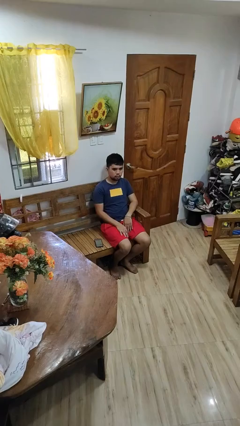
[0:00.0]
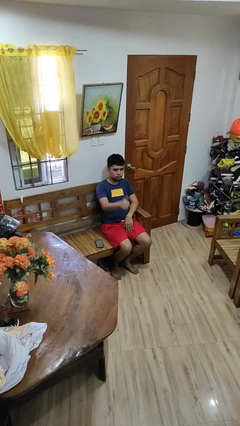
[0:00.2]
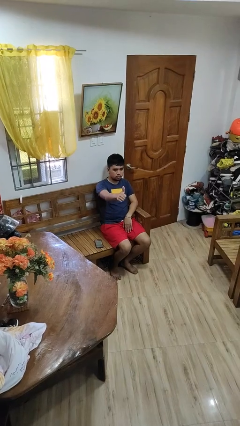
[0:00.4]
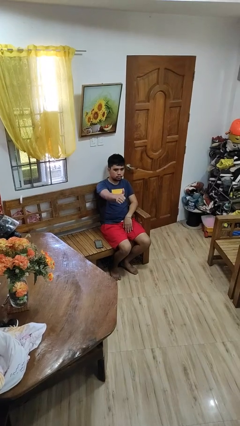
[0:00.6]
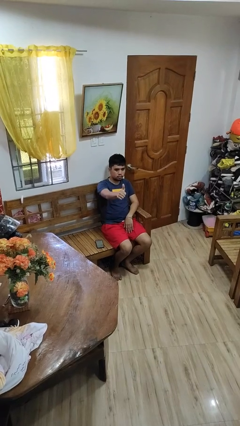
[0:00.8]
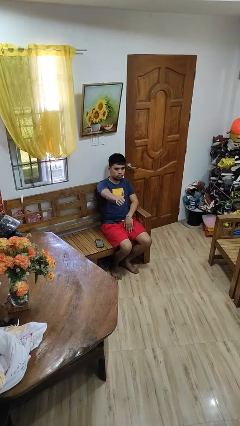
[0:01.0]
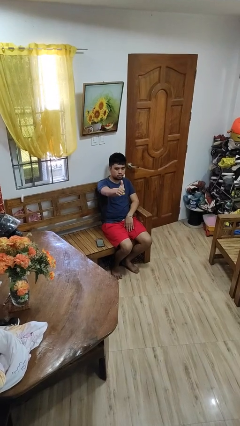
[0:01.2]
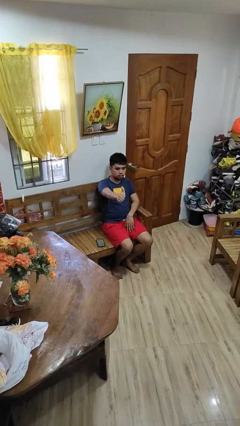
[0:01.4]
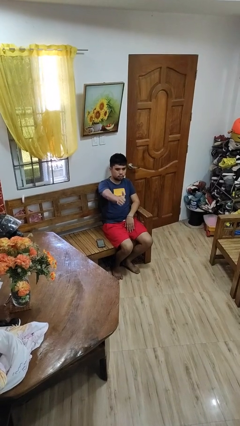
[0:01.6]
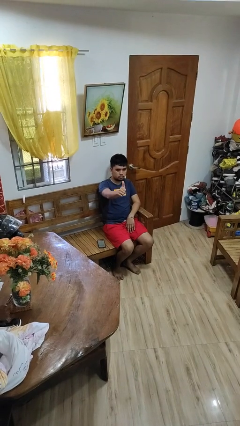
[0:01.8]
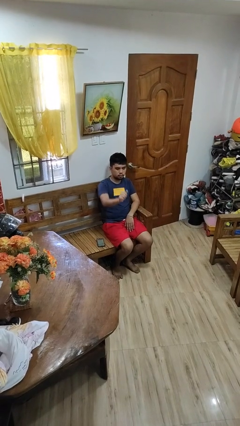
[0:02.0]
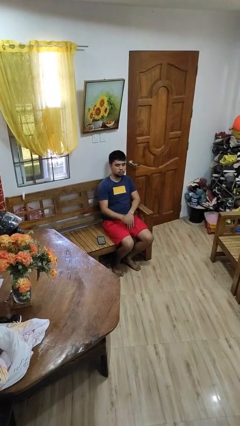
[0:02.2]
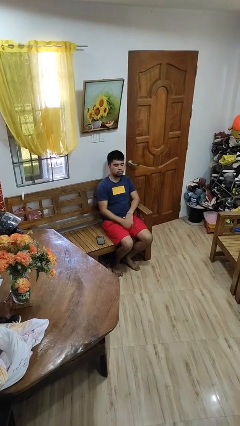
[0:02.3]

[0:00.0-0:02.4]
person gestures thumbs up

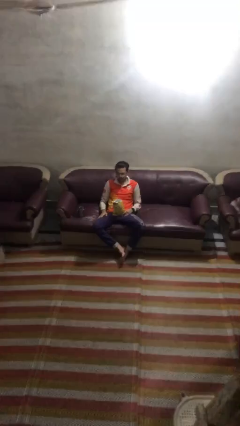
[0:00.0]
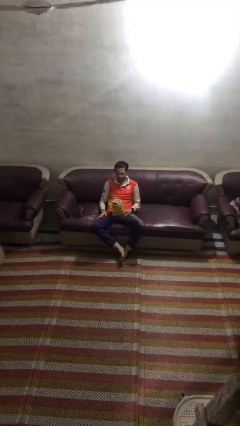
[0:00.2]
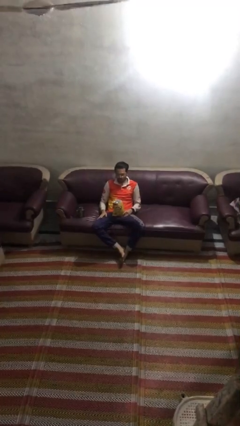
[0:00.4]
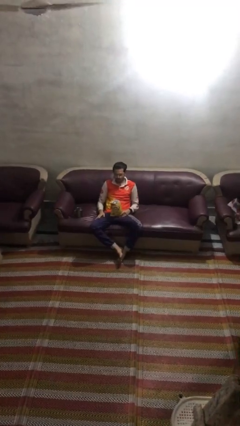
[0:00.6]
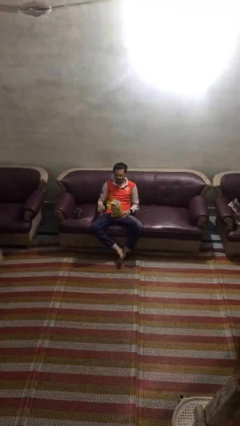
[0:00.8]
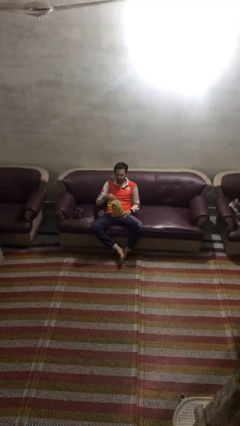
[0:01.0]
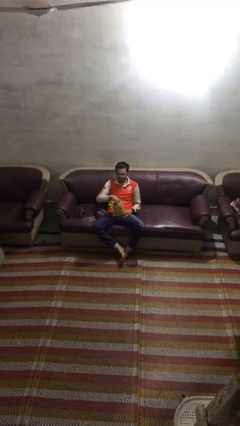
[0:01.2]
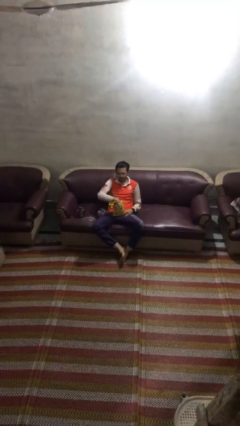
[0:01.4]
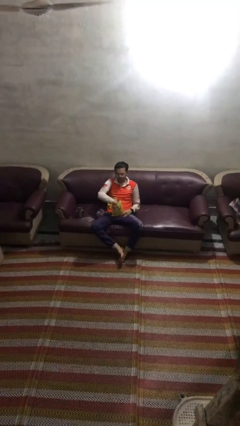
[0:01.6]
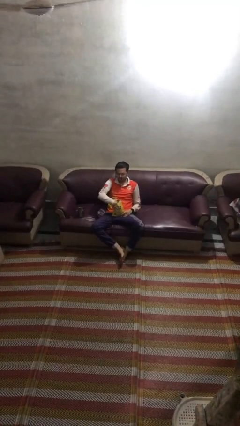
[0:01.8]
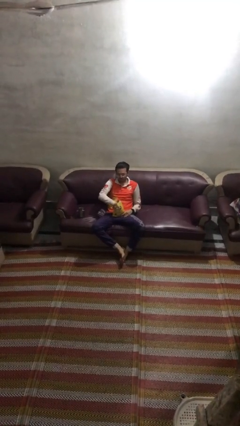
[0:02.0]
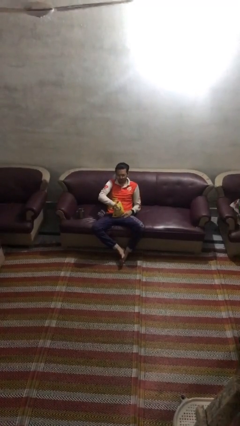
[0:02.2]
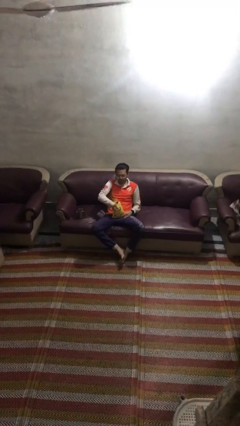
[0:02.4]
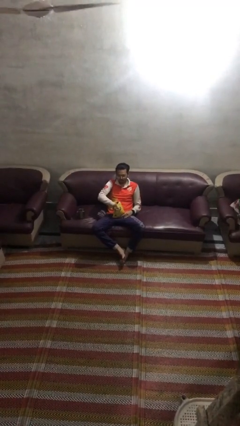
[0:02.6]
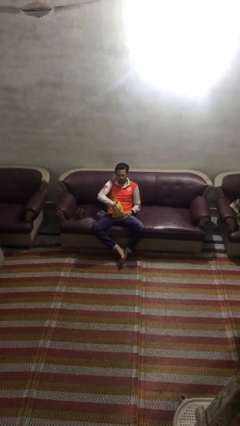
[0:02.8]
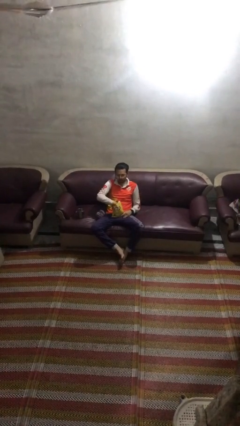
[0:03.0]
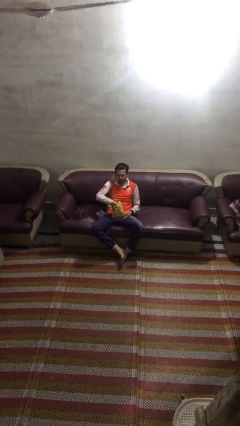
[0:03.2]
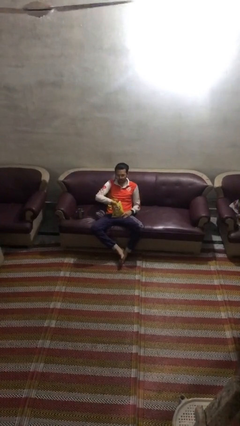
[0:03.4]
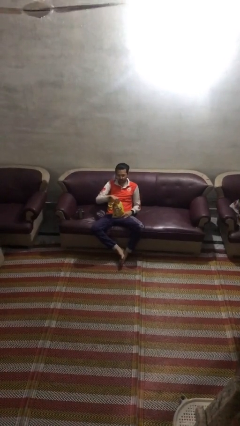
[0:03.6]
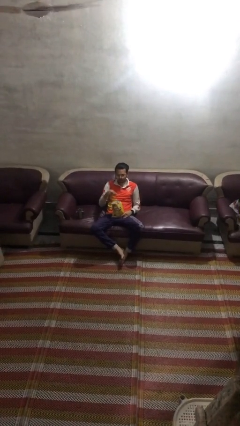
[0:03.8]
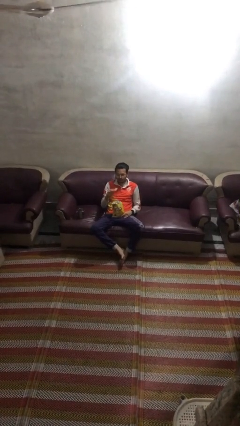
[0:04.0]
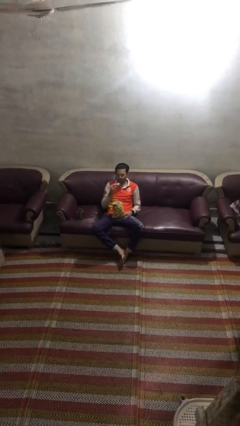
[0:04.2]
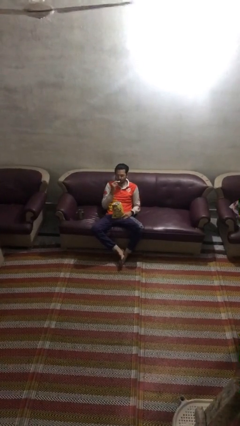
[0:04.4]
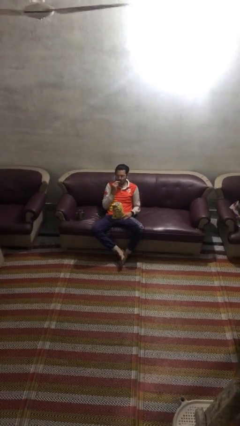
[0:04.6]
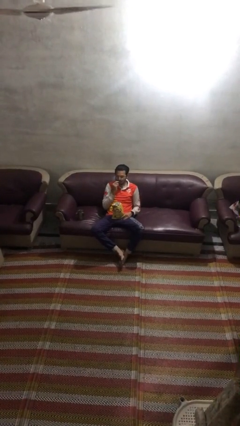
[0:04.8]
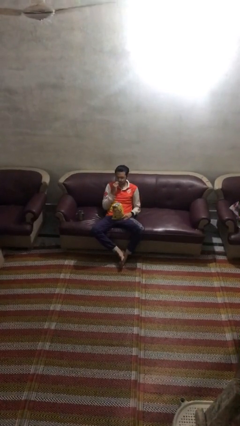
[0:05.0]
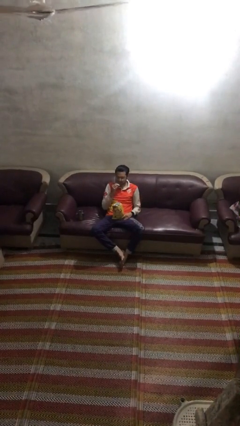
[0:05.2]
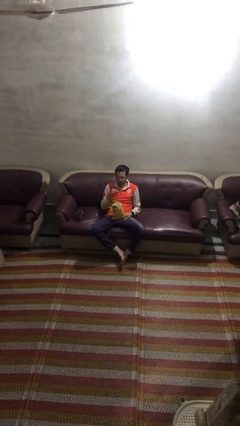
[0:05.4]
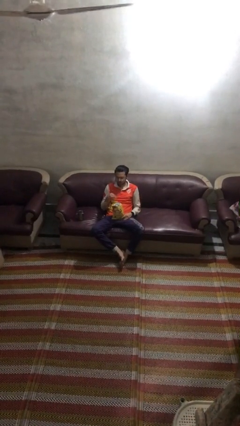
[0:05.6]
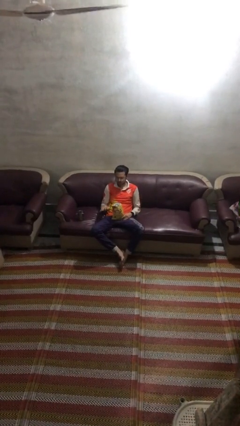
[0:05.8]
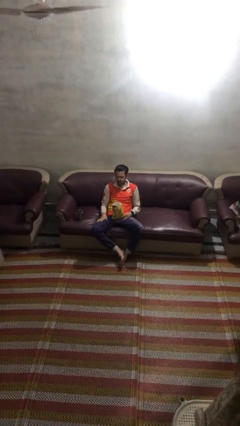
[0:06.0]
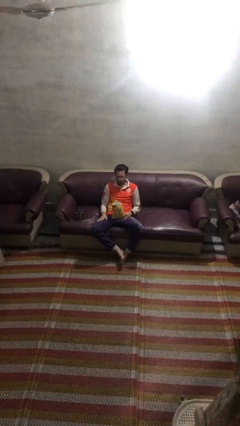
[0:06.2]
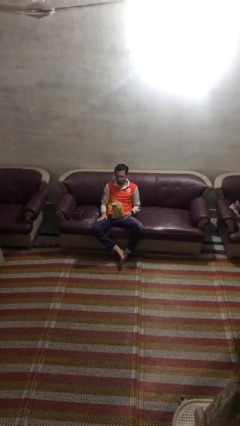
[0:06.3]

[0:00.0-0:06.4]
person eats snack from bag

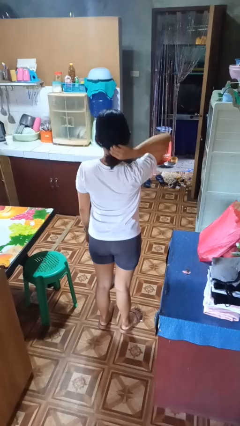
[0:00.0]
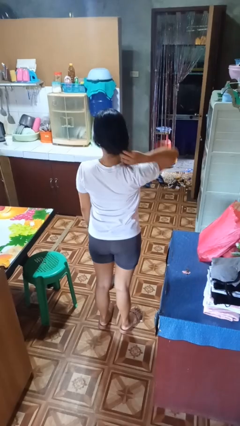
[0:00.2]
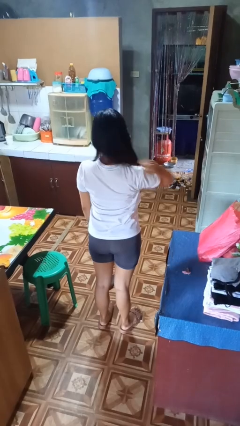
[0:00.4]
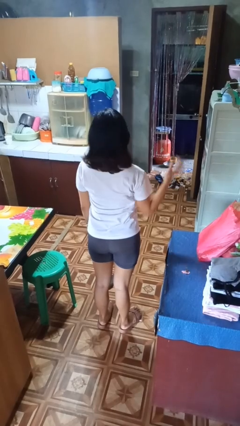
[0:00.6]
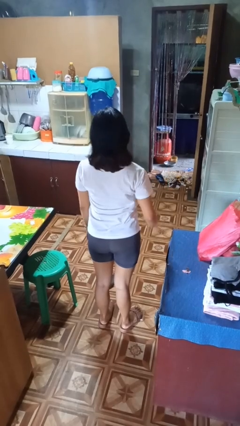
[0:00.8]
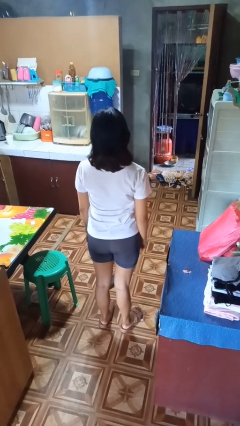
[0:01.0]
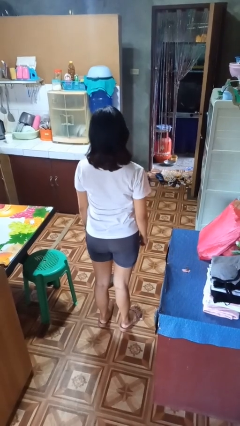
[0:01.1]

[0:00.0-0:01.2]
person takes off hairtie

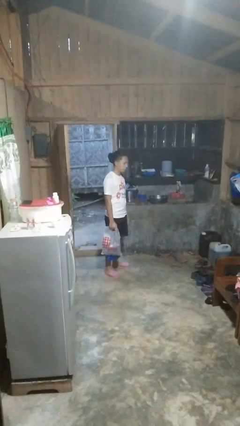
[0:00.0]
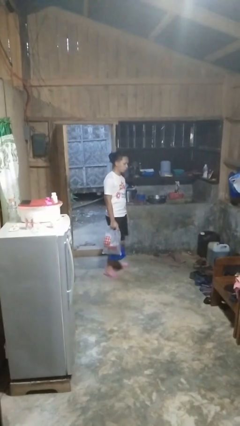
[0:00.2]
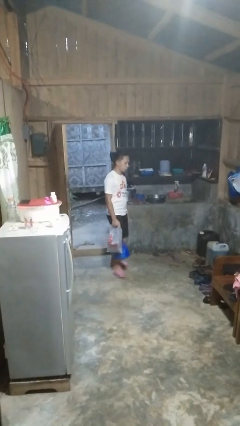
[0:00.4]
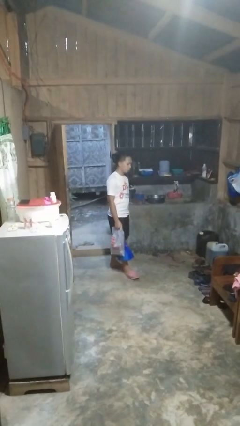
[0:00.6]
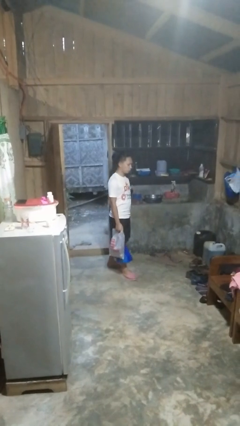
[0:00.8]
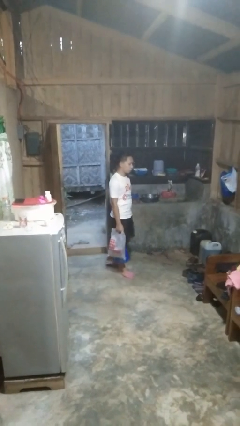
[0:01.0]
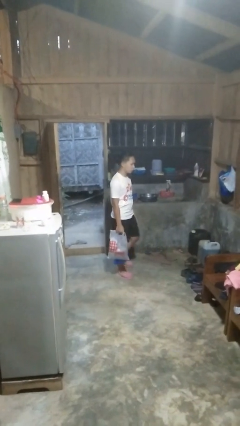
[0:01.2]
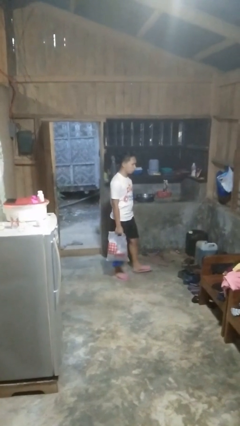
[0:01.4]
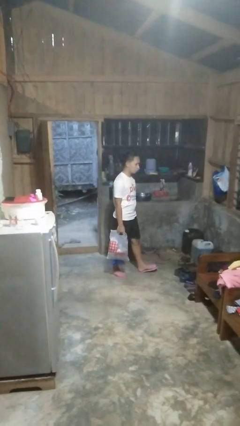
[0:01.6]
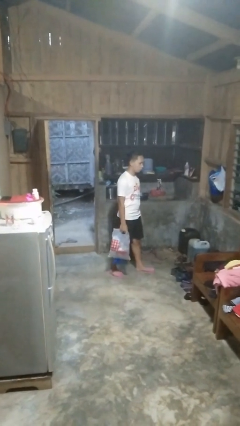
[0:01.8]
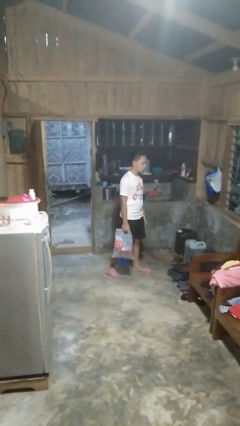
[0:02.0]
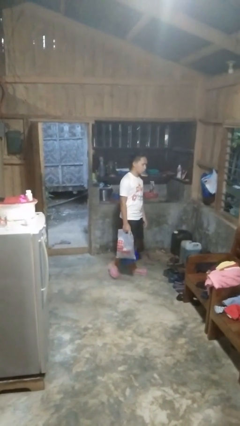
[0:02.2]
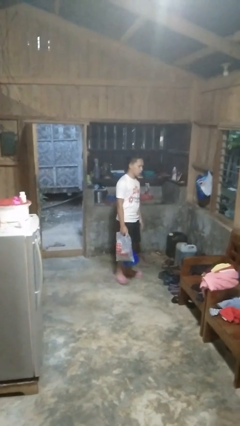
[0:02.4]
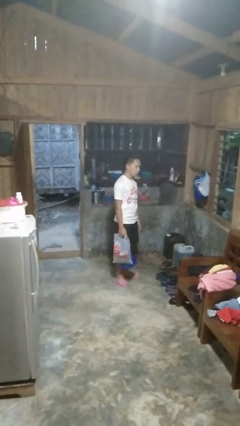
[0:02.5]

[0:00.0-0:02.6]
person carries groceries

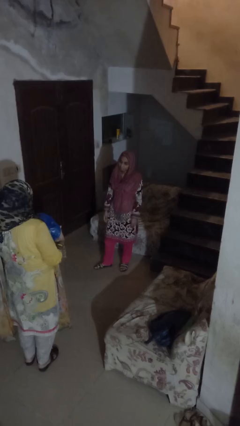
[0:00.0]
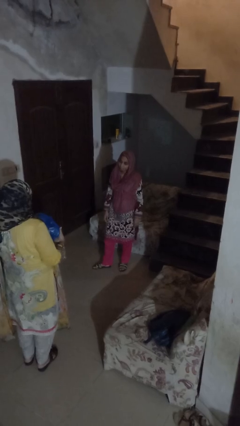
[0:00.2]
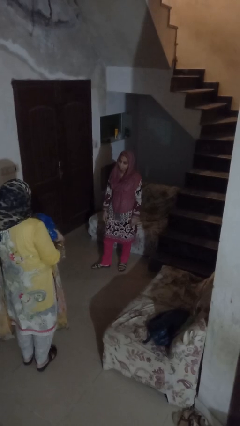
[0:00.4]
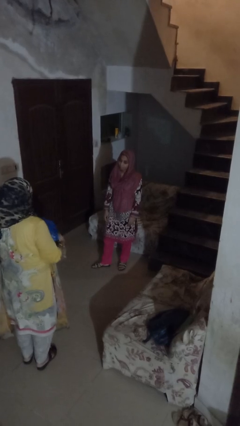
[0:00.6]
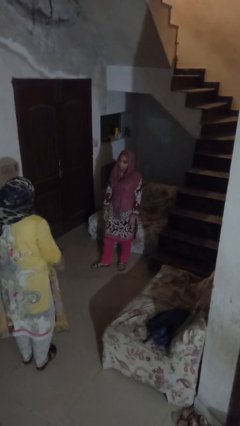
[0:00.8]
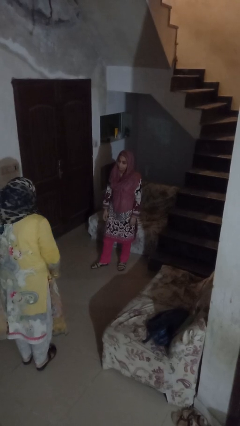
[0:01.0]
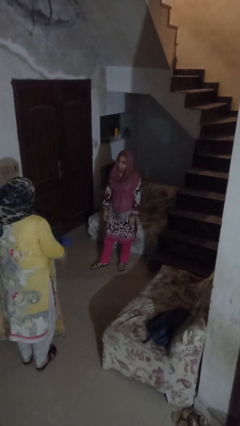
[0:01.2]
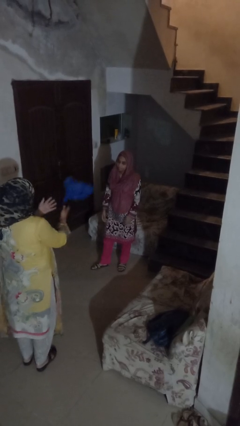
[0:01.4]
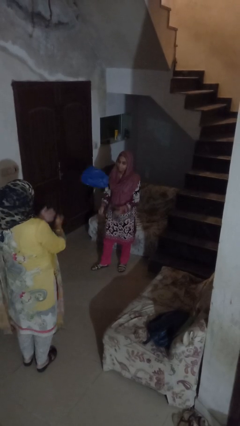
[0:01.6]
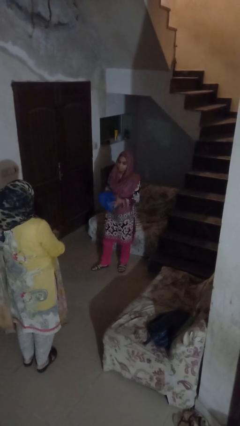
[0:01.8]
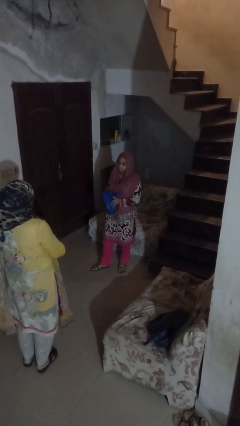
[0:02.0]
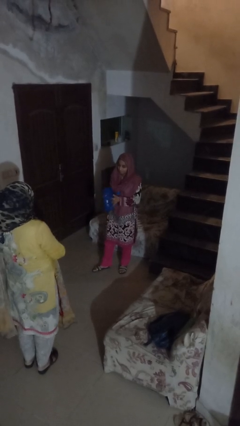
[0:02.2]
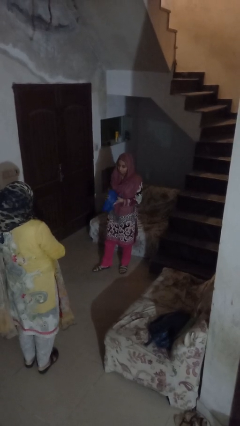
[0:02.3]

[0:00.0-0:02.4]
person catches object from person

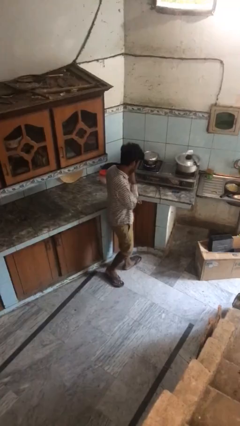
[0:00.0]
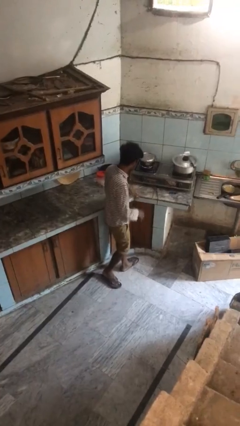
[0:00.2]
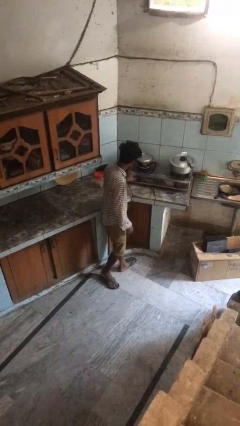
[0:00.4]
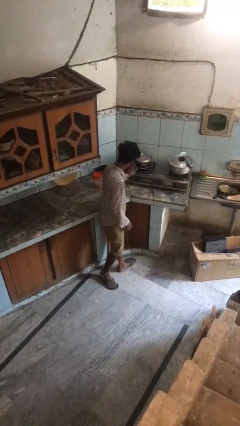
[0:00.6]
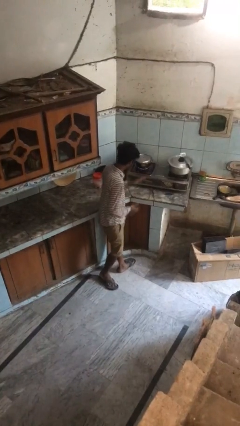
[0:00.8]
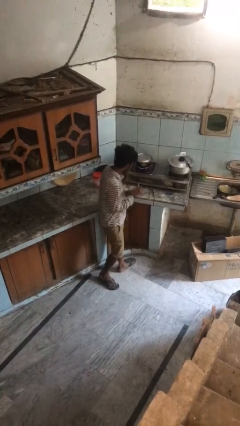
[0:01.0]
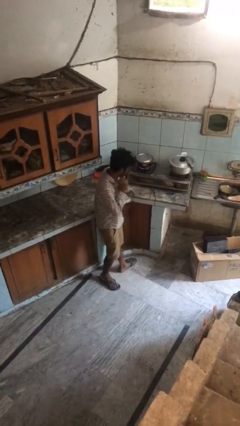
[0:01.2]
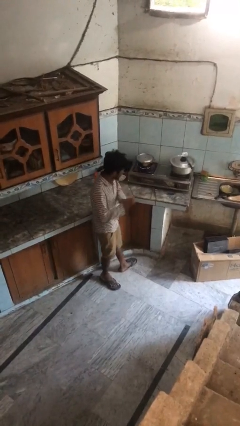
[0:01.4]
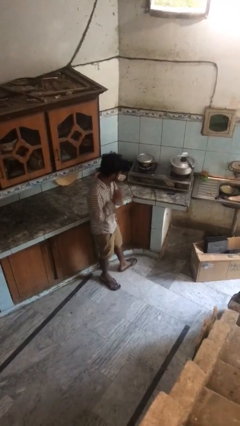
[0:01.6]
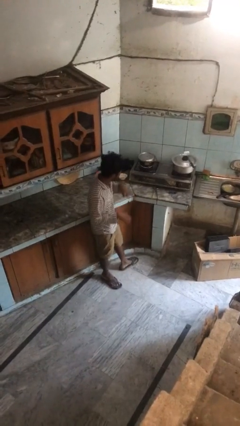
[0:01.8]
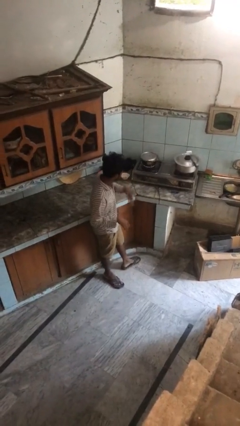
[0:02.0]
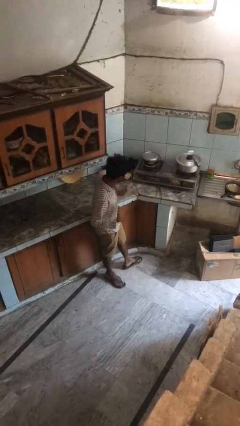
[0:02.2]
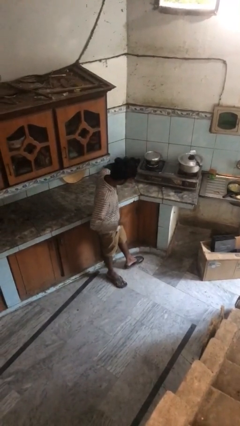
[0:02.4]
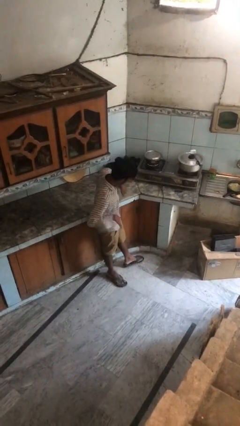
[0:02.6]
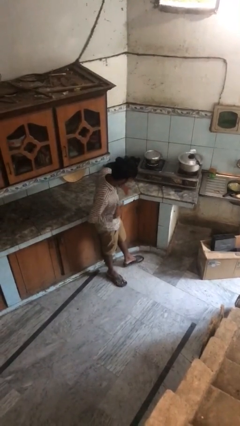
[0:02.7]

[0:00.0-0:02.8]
person burns hand
